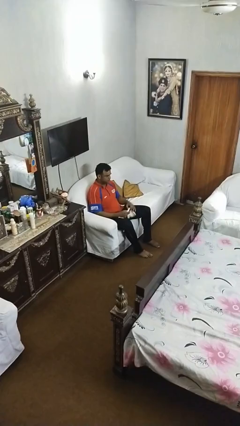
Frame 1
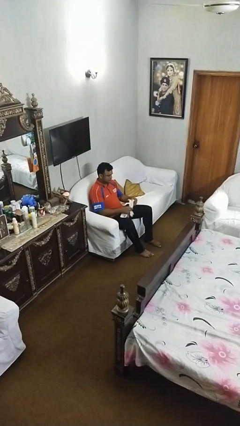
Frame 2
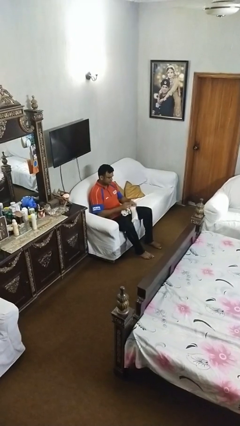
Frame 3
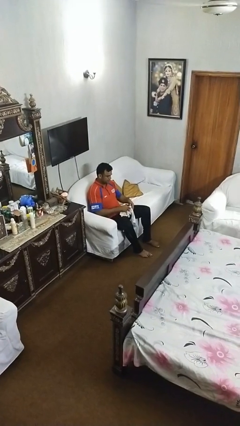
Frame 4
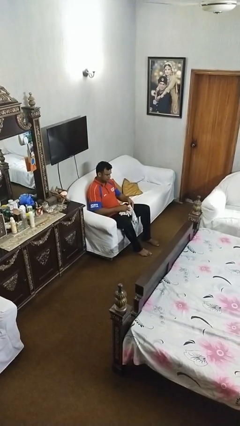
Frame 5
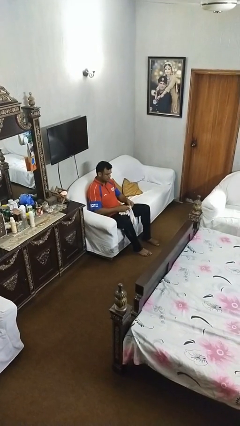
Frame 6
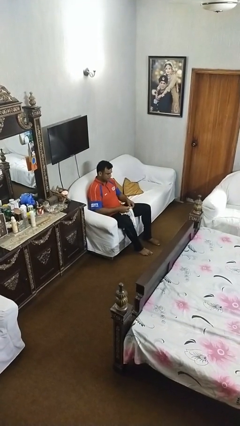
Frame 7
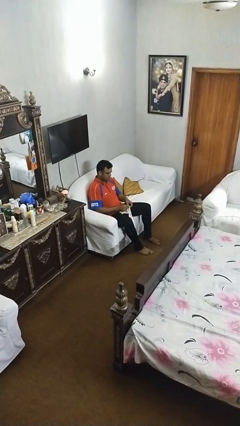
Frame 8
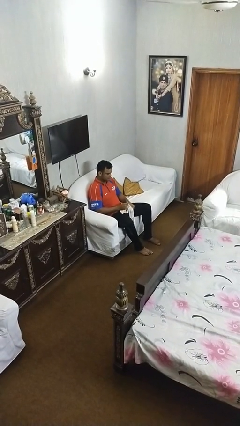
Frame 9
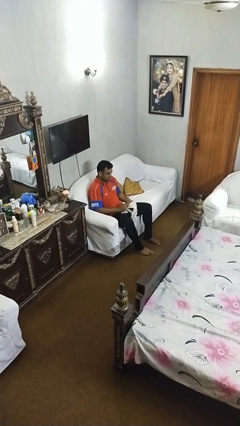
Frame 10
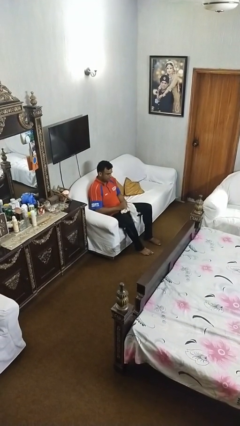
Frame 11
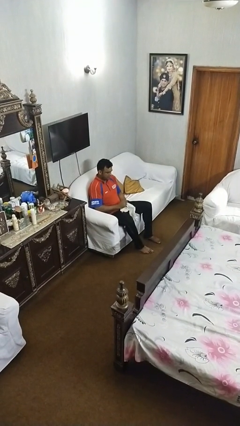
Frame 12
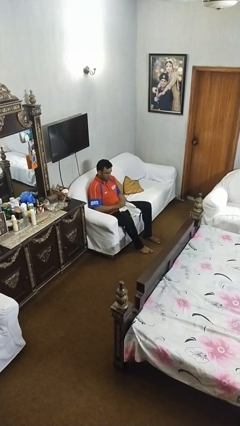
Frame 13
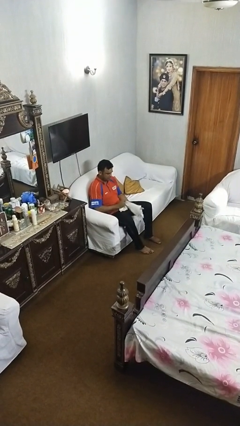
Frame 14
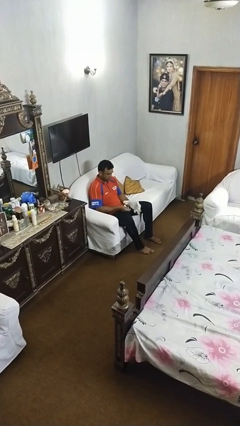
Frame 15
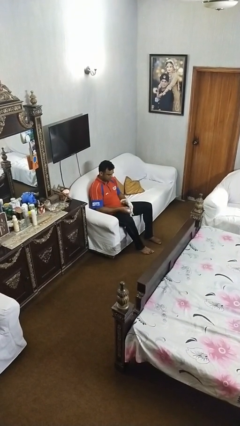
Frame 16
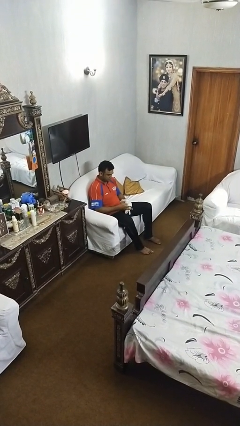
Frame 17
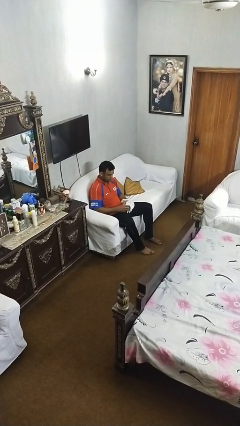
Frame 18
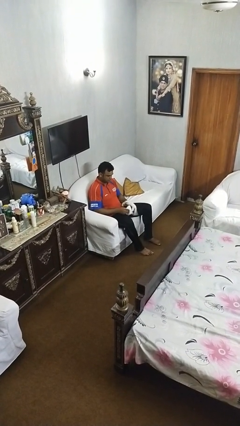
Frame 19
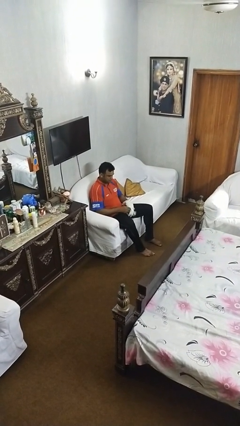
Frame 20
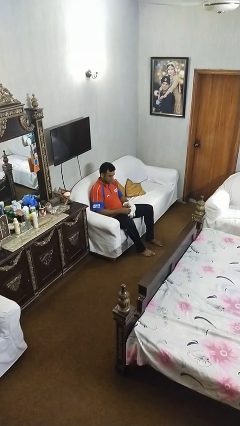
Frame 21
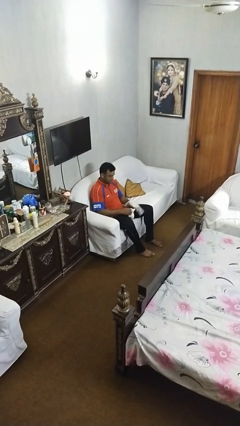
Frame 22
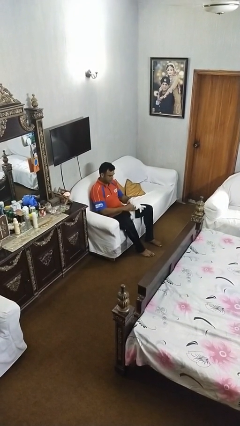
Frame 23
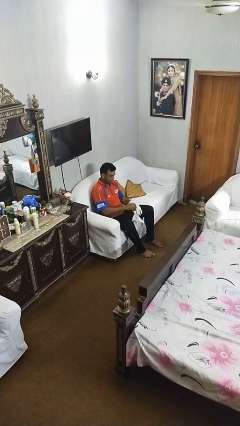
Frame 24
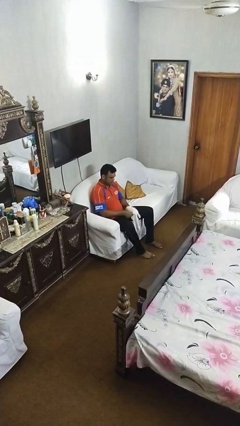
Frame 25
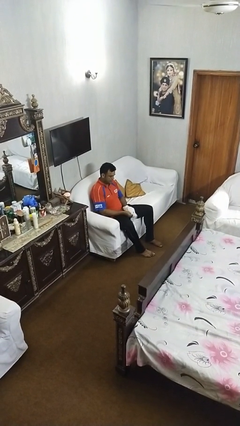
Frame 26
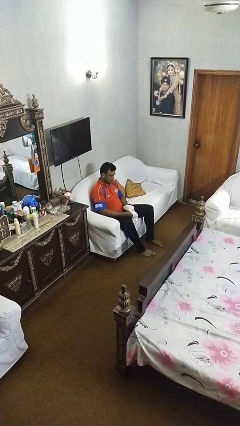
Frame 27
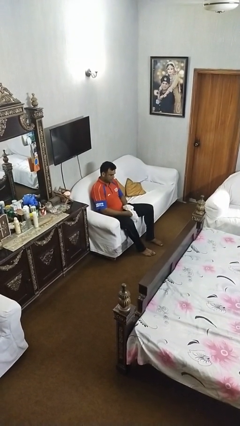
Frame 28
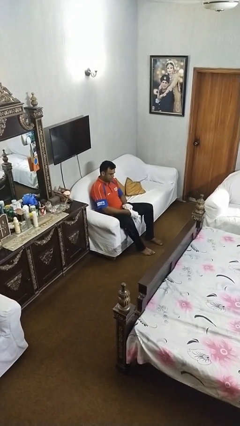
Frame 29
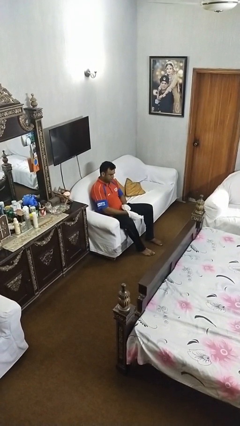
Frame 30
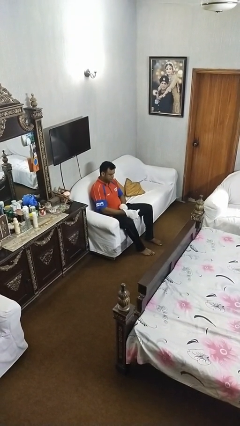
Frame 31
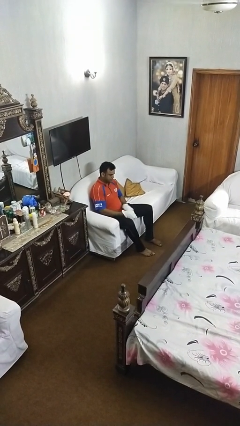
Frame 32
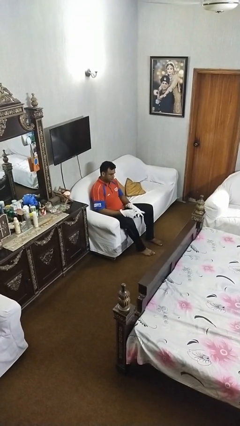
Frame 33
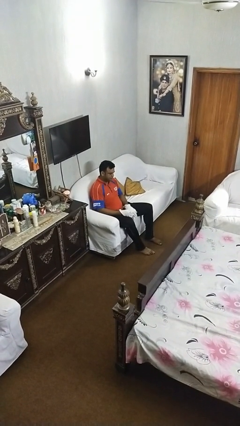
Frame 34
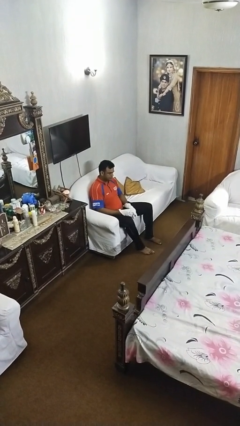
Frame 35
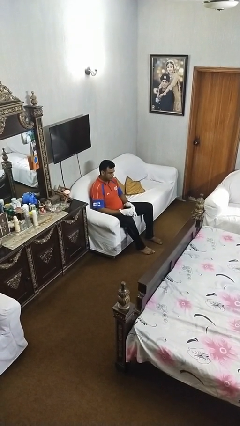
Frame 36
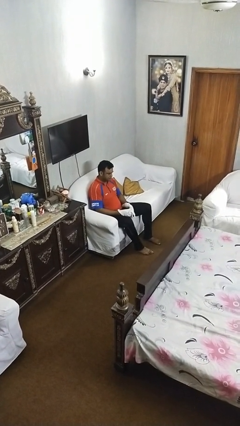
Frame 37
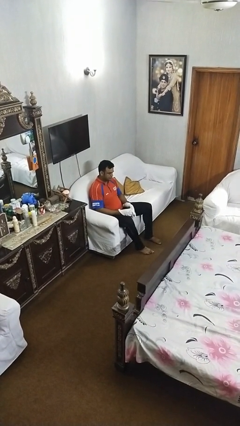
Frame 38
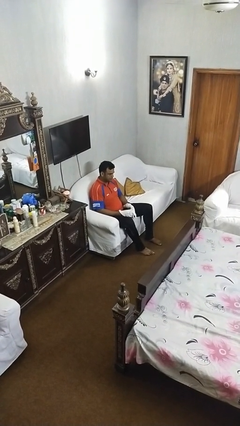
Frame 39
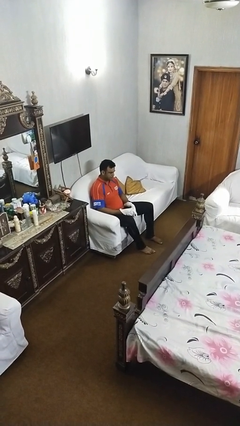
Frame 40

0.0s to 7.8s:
person puts on gloves

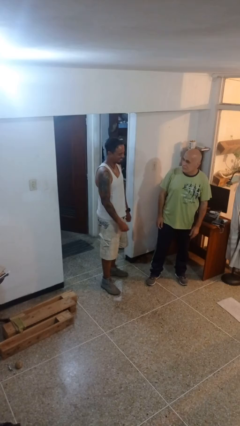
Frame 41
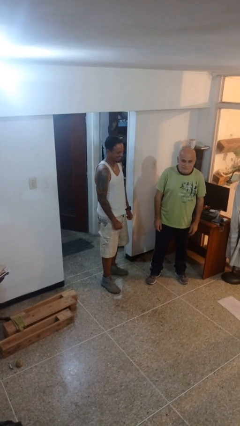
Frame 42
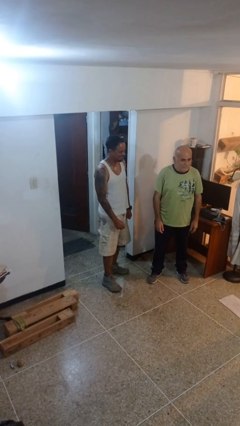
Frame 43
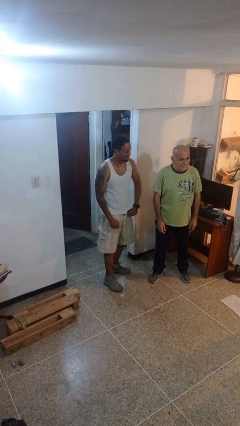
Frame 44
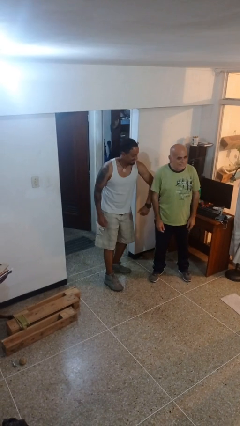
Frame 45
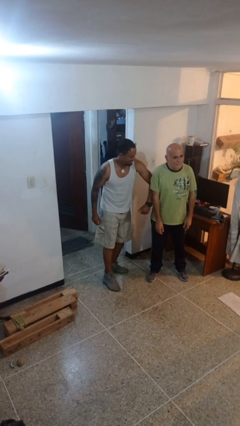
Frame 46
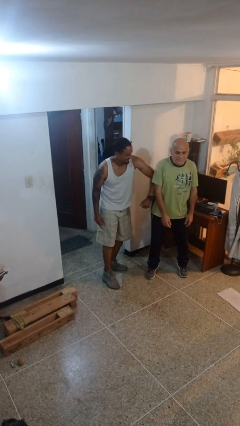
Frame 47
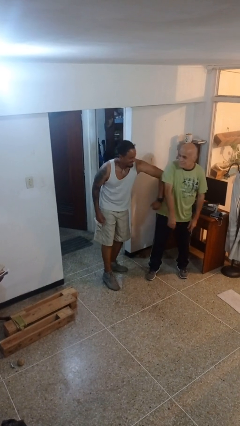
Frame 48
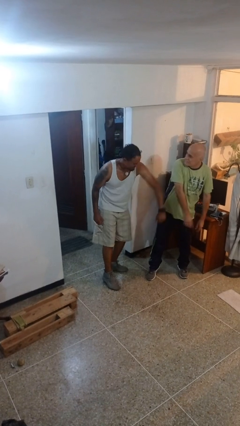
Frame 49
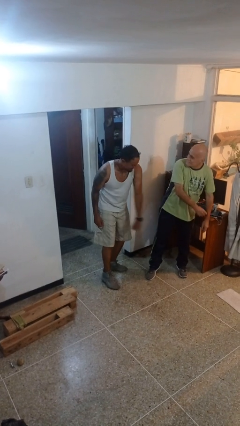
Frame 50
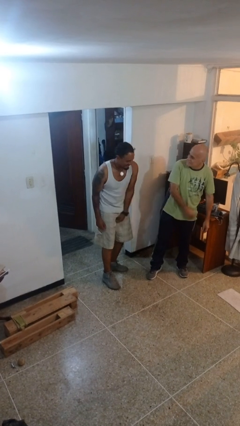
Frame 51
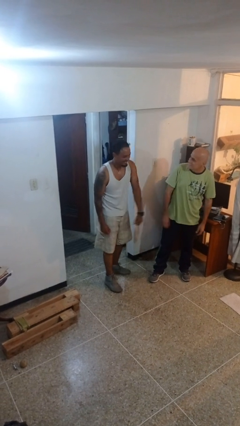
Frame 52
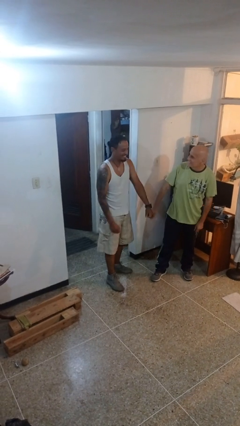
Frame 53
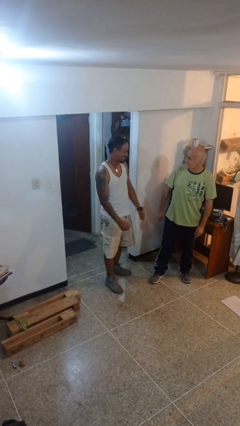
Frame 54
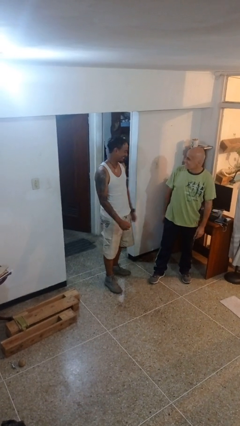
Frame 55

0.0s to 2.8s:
person nudges person with elbow

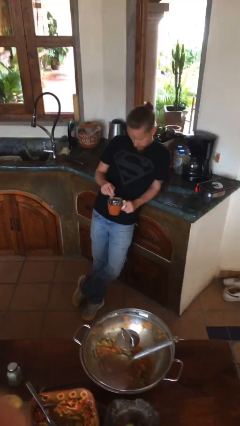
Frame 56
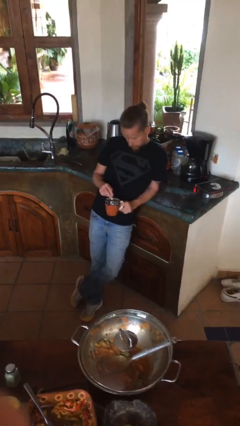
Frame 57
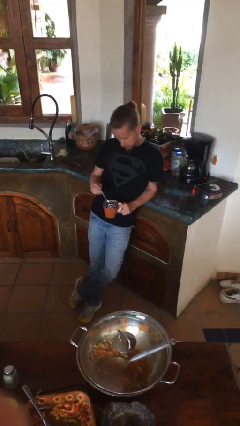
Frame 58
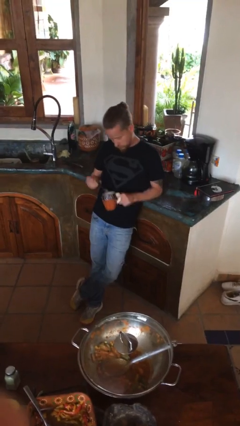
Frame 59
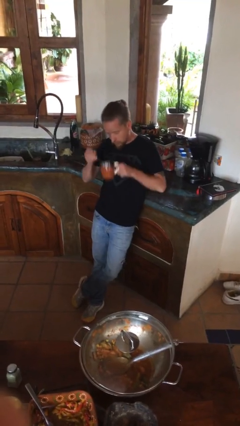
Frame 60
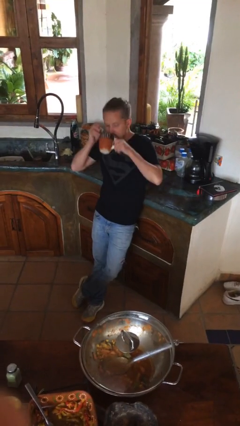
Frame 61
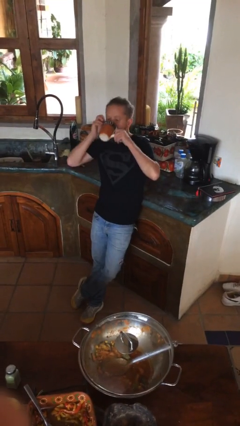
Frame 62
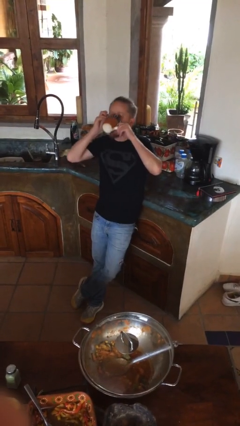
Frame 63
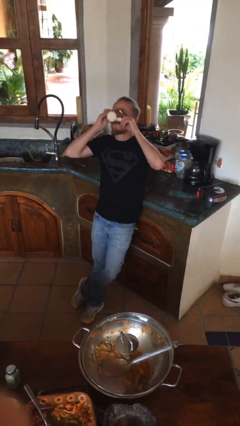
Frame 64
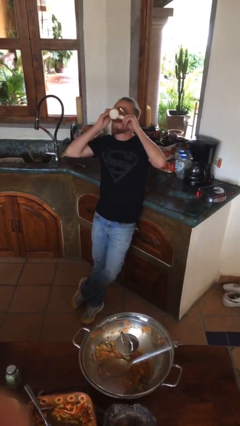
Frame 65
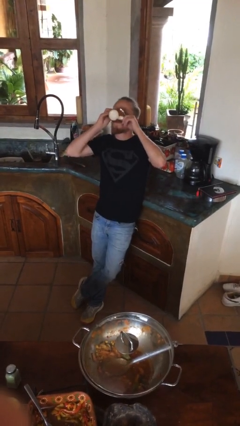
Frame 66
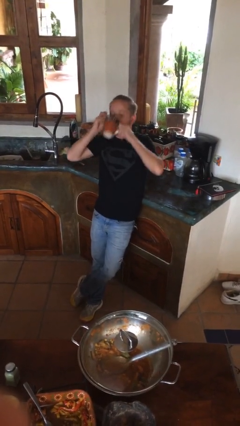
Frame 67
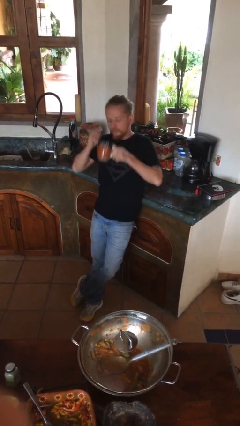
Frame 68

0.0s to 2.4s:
person drinks from mug

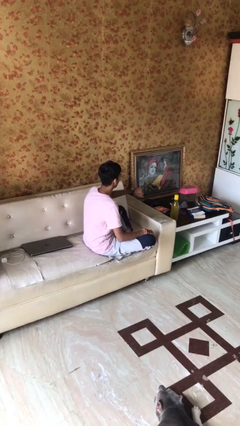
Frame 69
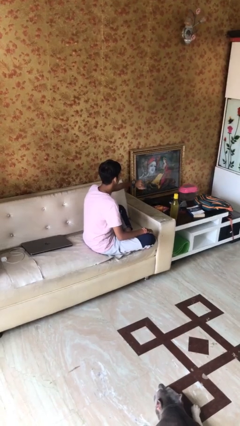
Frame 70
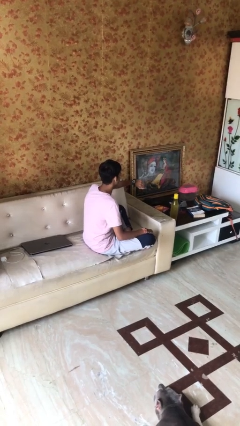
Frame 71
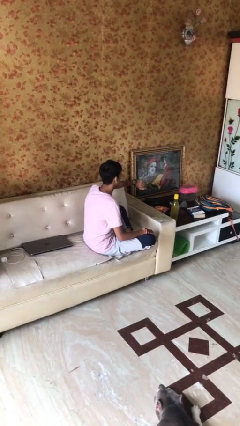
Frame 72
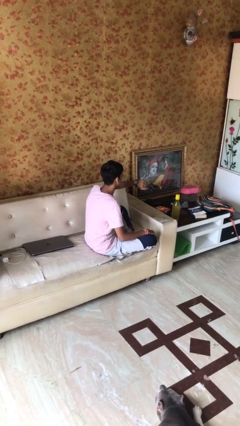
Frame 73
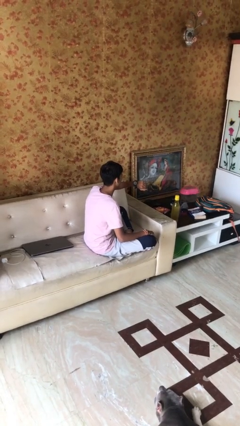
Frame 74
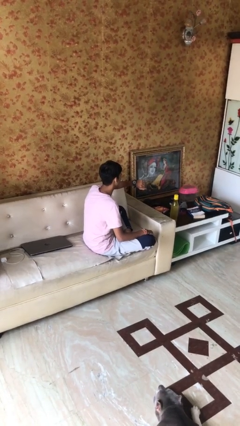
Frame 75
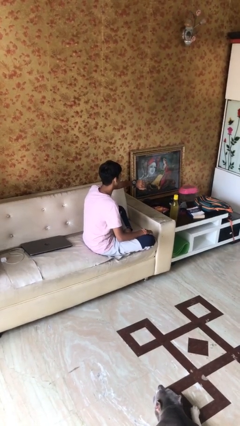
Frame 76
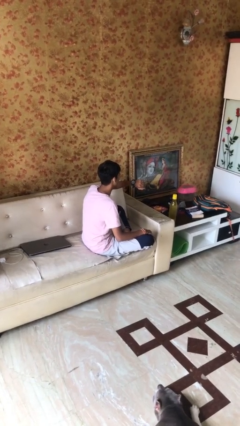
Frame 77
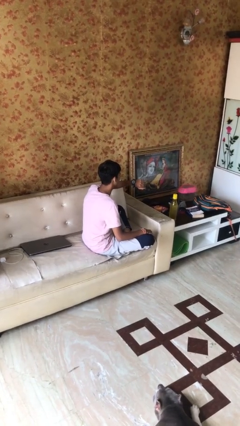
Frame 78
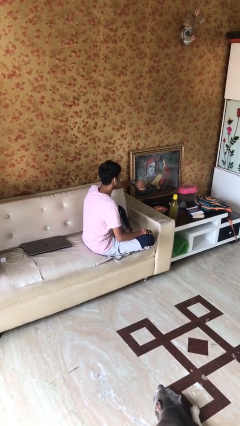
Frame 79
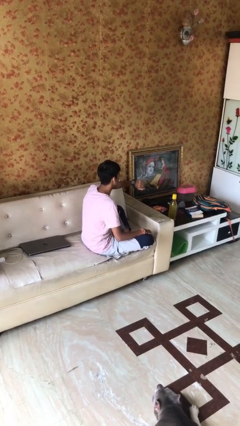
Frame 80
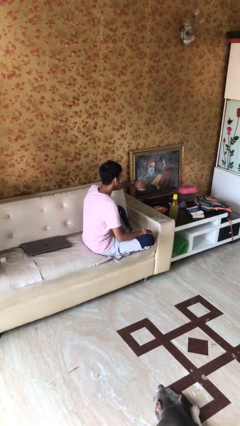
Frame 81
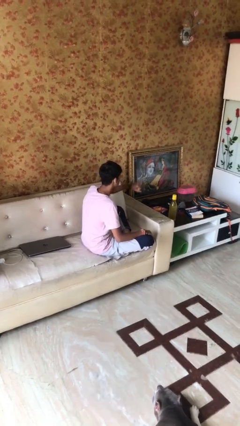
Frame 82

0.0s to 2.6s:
person looks at wristwatch

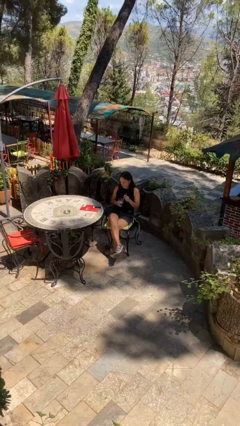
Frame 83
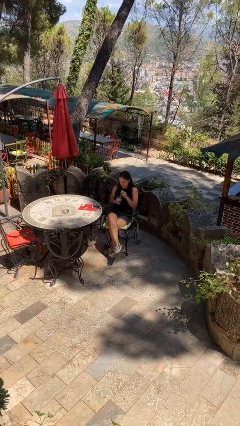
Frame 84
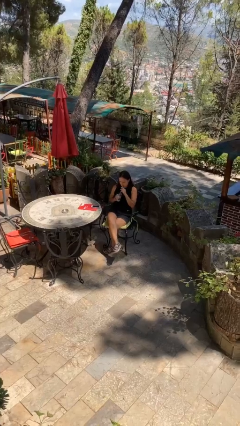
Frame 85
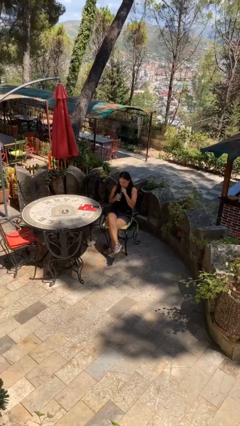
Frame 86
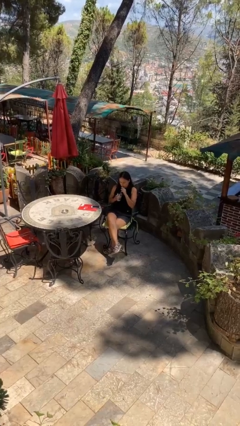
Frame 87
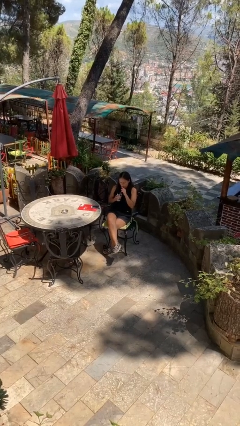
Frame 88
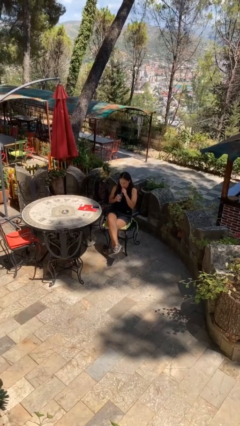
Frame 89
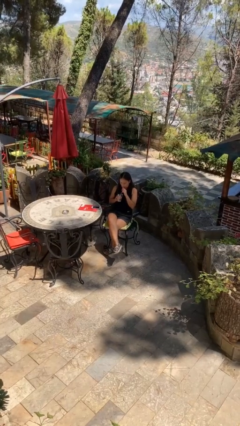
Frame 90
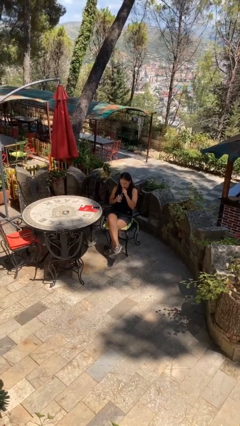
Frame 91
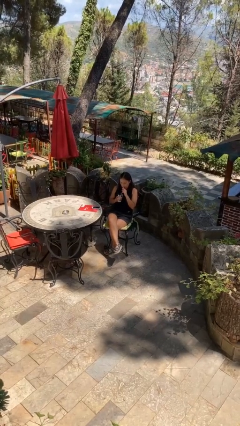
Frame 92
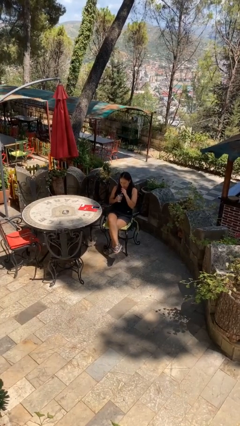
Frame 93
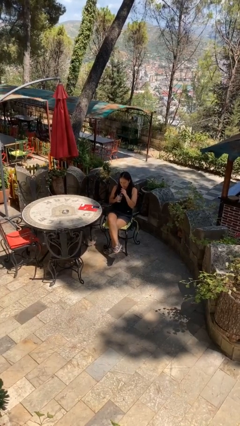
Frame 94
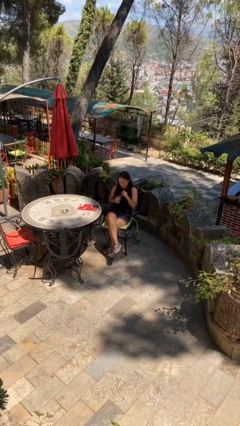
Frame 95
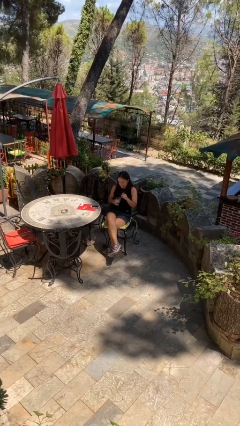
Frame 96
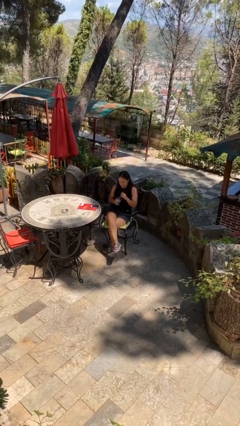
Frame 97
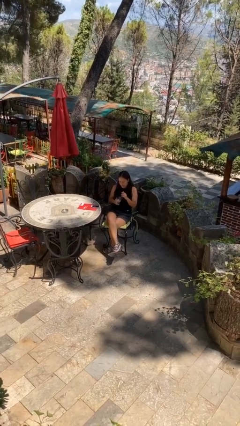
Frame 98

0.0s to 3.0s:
person drinks from straw
